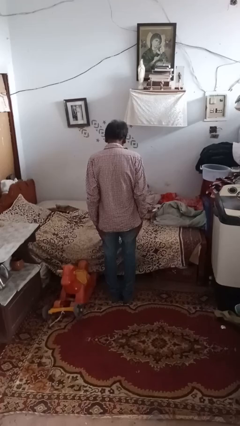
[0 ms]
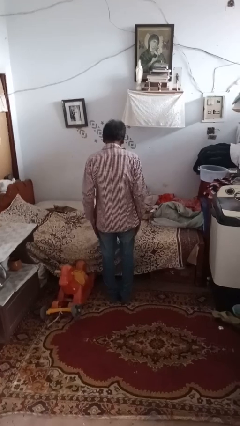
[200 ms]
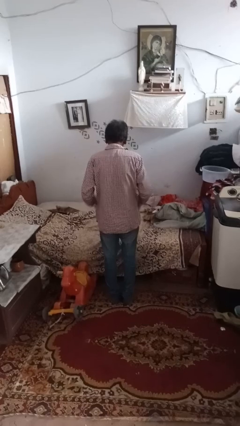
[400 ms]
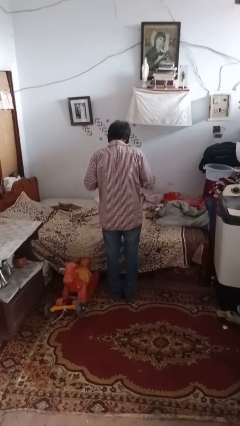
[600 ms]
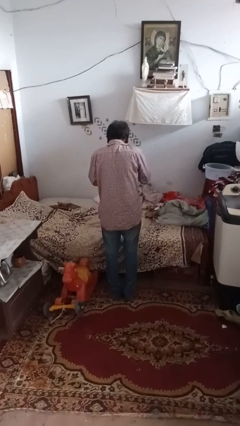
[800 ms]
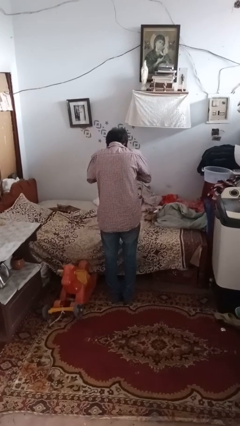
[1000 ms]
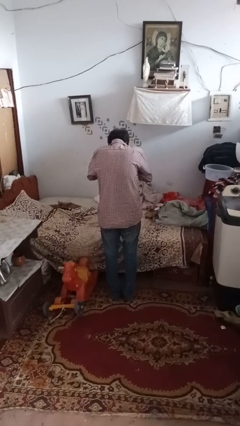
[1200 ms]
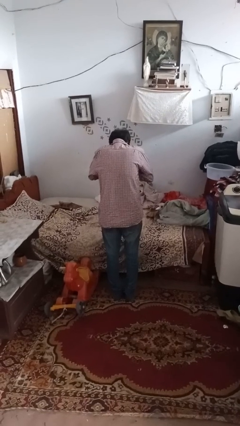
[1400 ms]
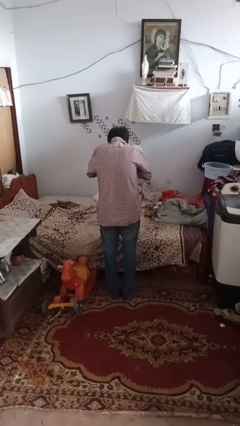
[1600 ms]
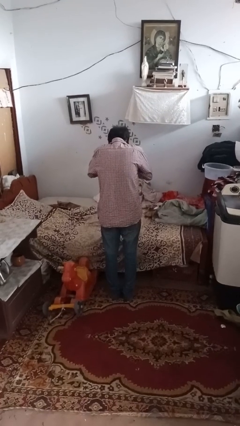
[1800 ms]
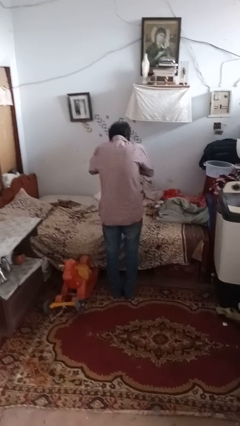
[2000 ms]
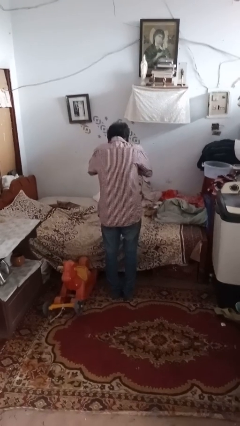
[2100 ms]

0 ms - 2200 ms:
person sneezes into hand

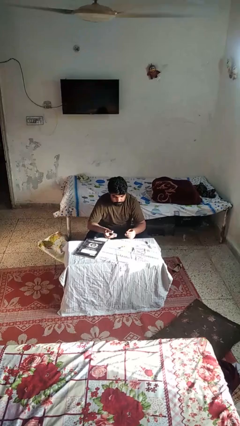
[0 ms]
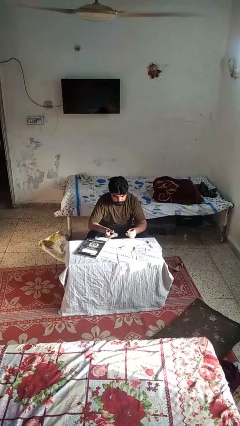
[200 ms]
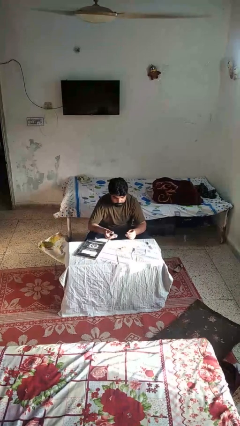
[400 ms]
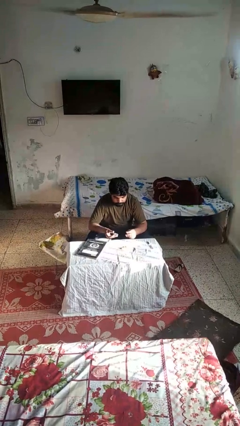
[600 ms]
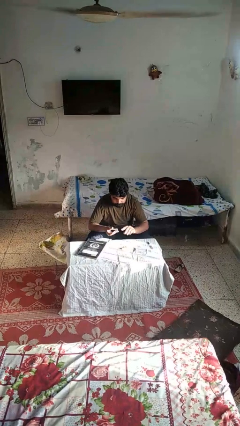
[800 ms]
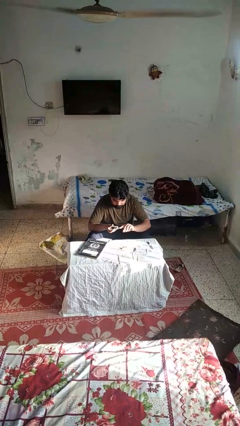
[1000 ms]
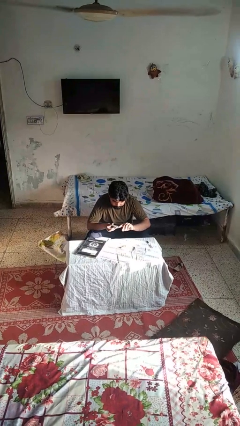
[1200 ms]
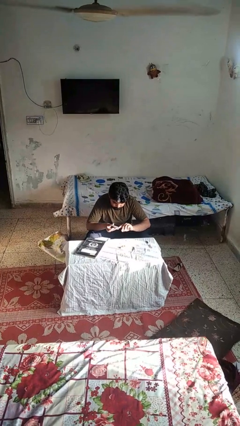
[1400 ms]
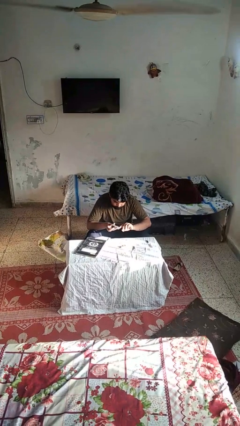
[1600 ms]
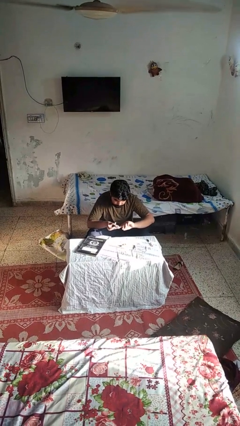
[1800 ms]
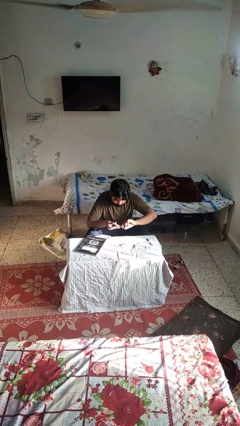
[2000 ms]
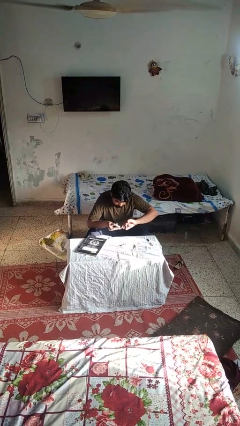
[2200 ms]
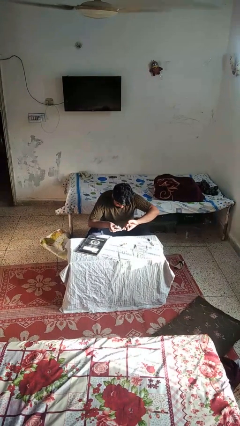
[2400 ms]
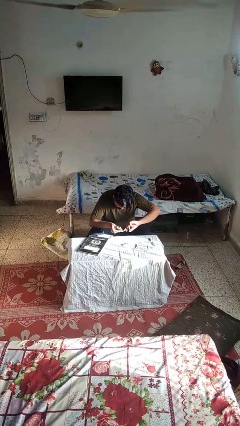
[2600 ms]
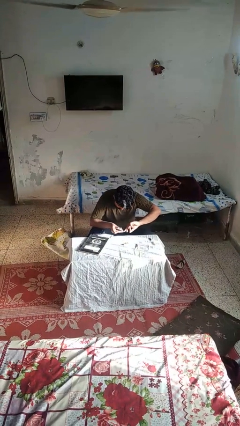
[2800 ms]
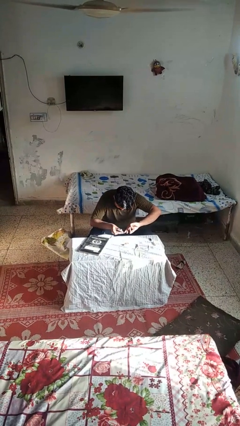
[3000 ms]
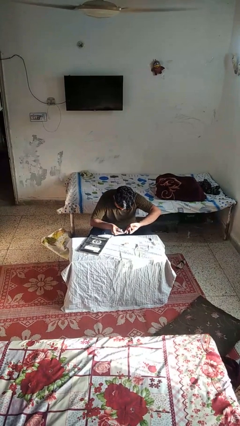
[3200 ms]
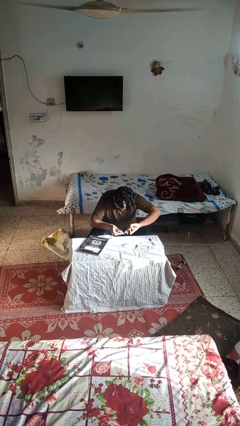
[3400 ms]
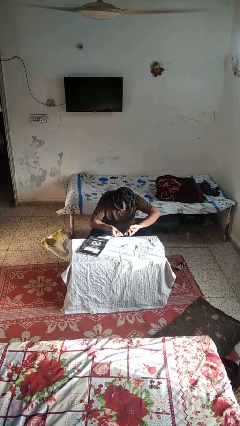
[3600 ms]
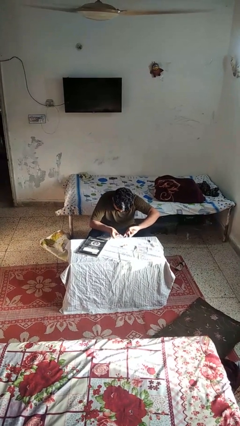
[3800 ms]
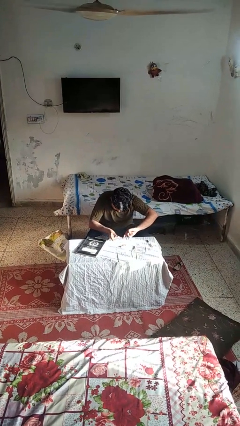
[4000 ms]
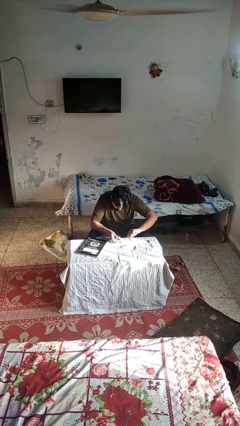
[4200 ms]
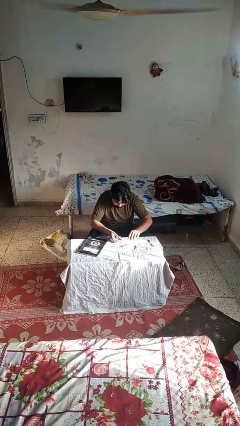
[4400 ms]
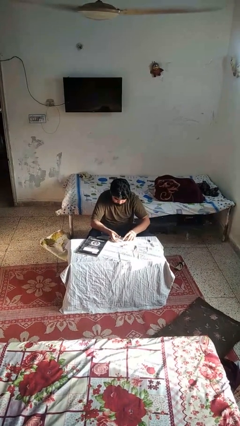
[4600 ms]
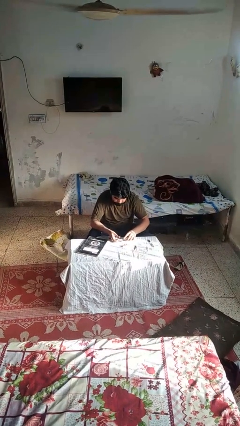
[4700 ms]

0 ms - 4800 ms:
person clips fingernails

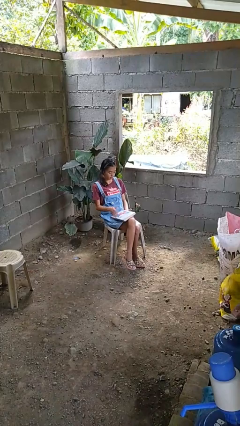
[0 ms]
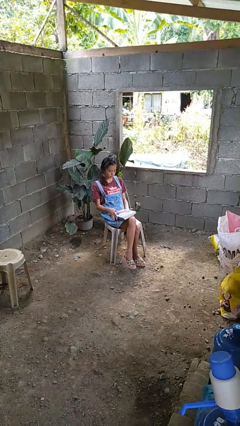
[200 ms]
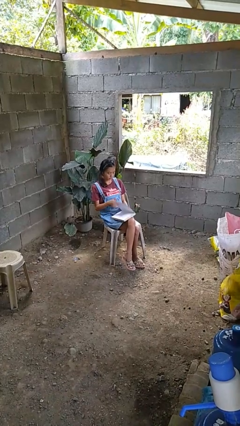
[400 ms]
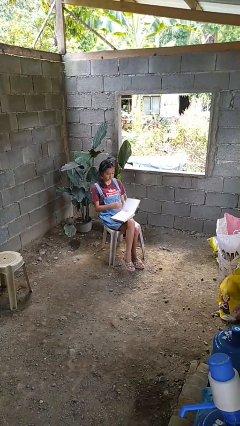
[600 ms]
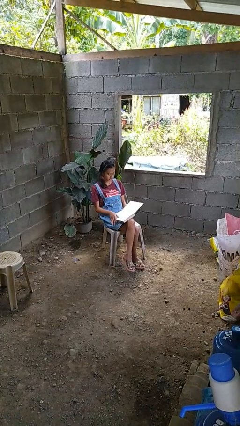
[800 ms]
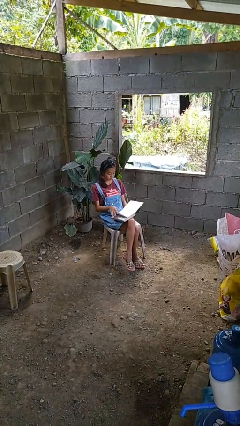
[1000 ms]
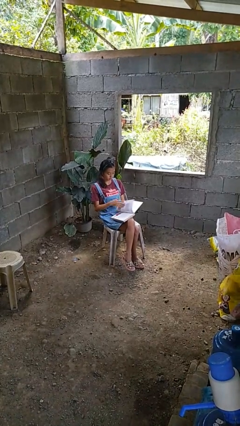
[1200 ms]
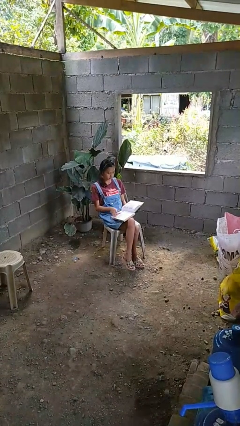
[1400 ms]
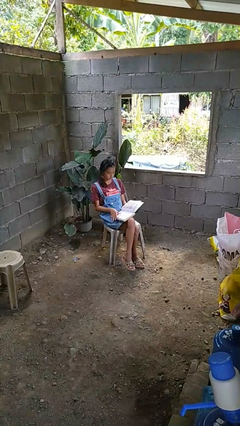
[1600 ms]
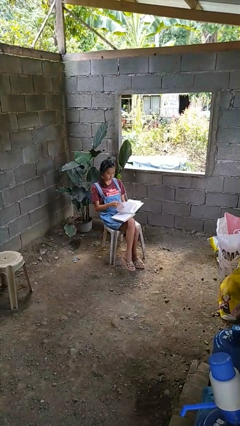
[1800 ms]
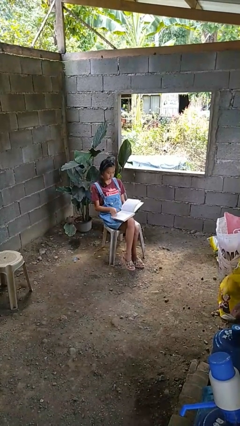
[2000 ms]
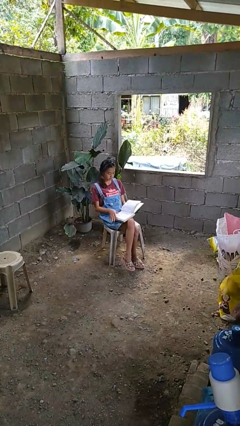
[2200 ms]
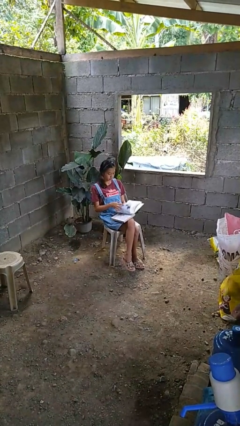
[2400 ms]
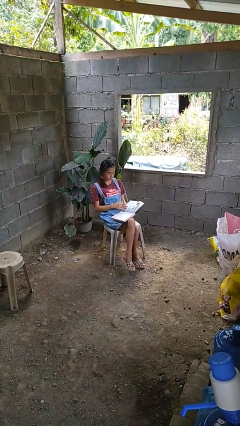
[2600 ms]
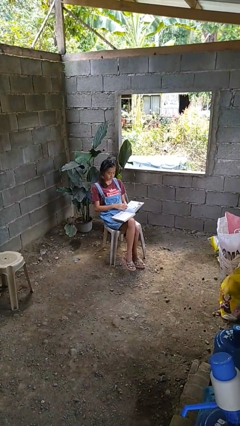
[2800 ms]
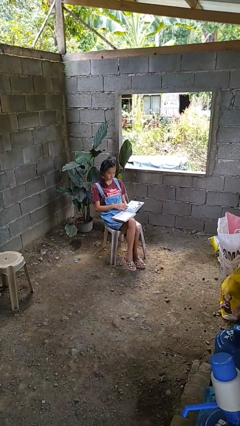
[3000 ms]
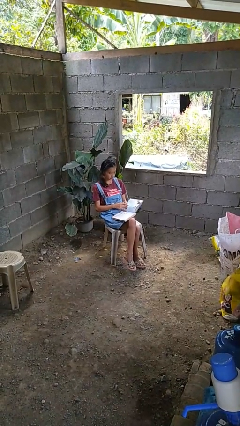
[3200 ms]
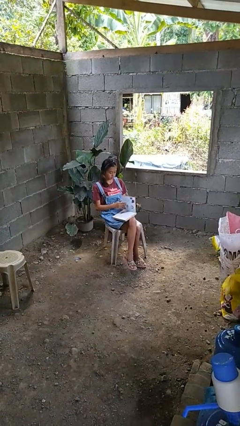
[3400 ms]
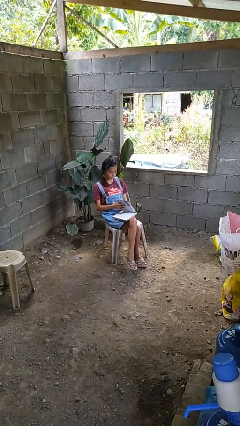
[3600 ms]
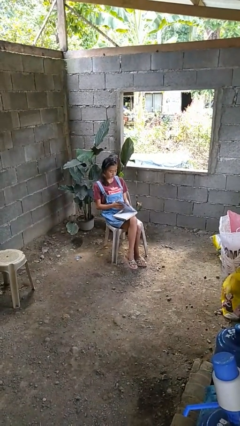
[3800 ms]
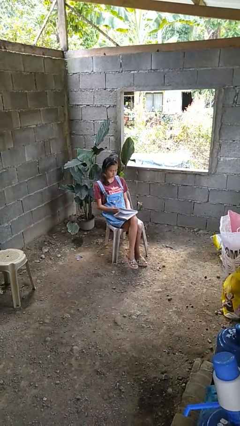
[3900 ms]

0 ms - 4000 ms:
person reads book

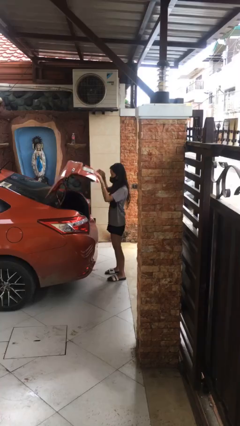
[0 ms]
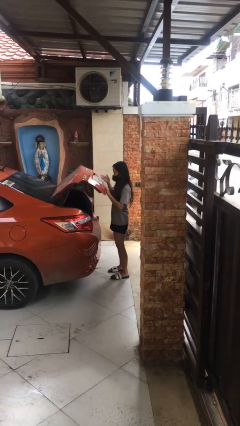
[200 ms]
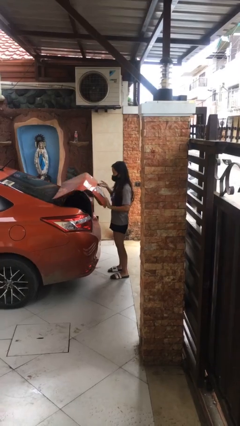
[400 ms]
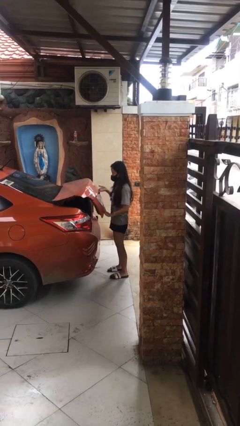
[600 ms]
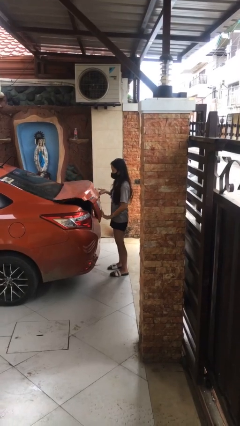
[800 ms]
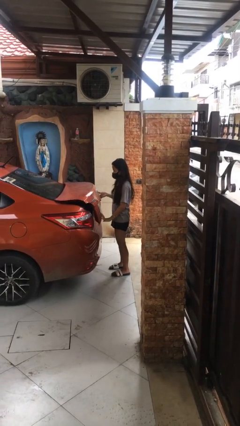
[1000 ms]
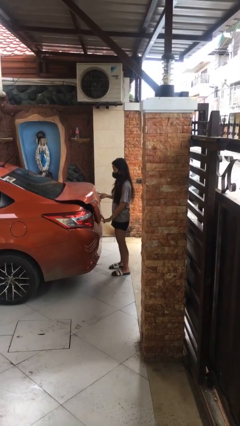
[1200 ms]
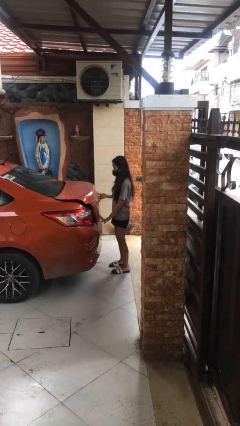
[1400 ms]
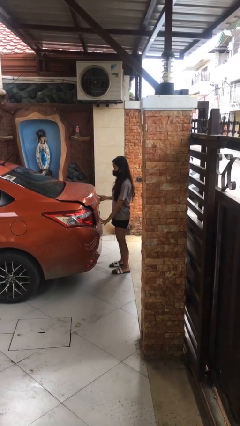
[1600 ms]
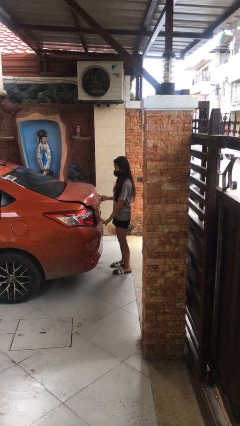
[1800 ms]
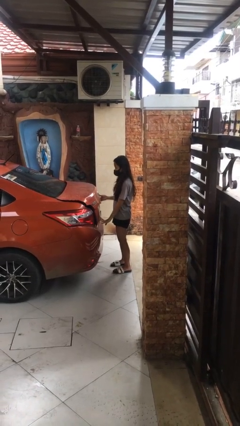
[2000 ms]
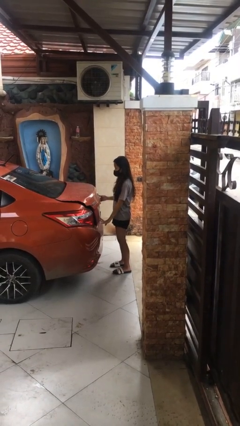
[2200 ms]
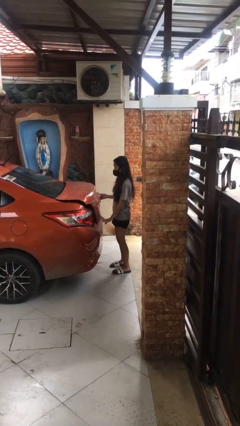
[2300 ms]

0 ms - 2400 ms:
person closes car trunk

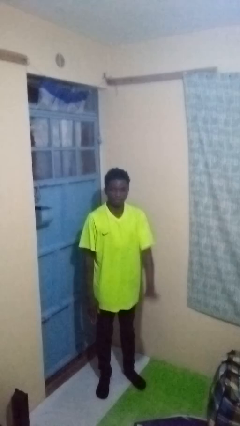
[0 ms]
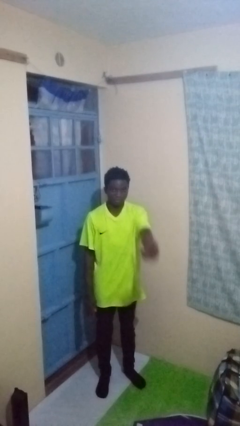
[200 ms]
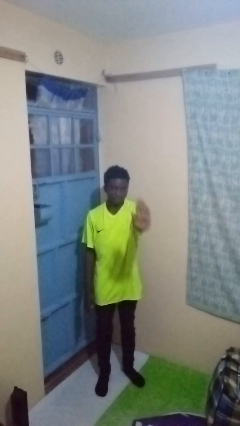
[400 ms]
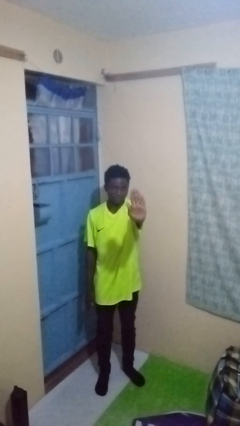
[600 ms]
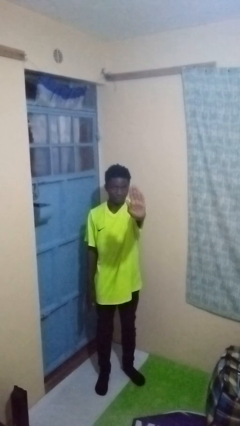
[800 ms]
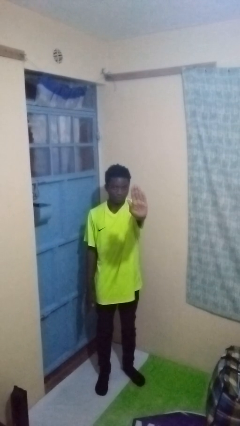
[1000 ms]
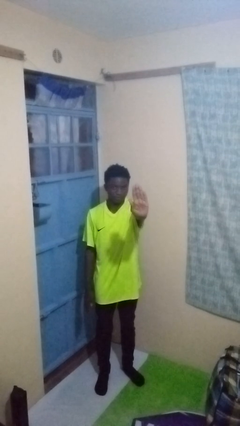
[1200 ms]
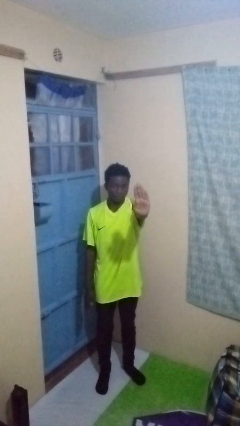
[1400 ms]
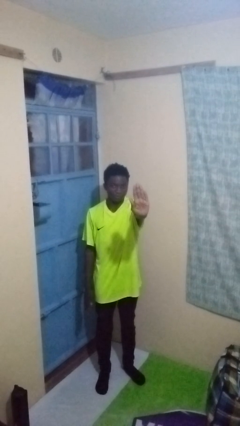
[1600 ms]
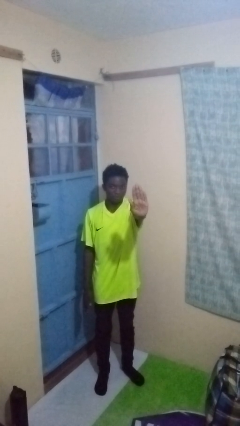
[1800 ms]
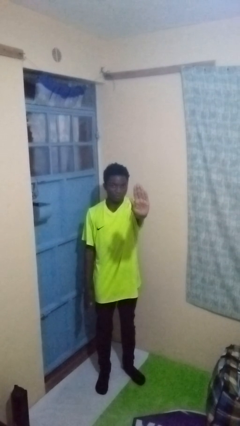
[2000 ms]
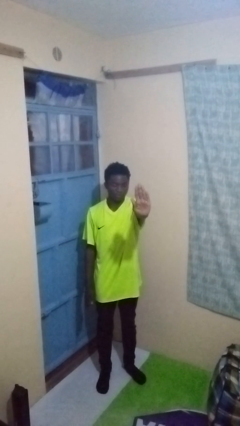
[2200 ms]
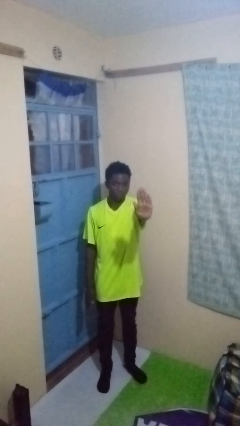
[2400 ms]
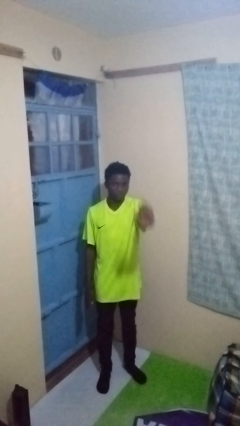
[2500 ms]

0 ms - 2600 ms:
person gestures stop

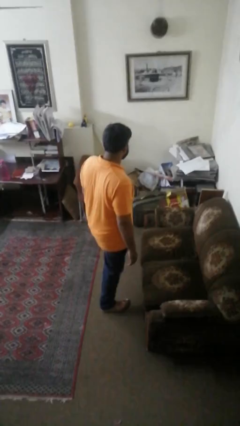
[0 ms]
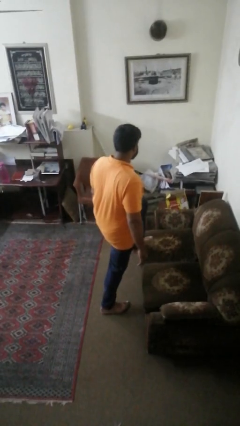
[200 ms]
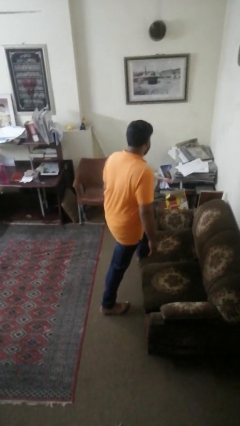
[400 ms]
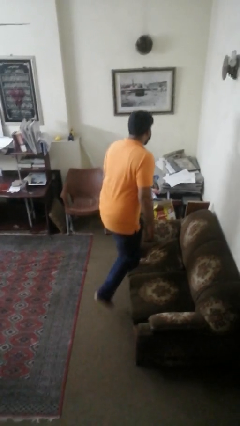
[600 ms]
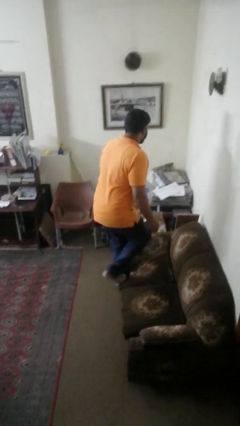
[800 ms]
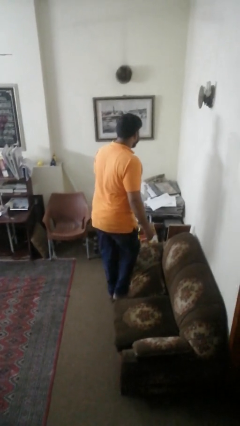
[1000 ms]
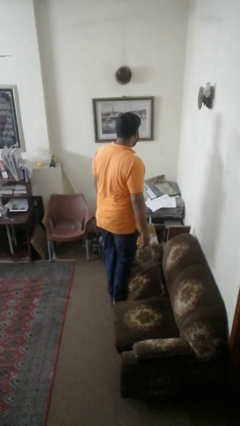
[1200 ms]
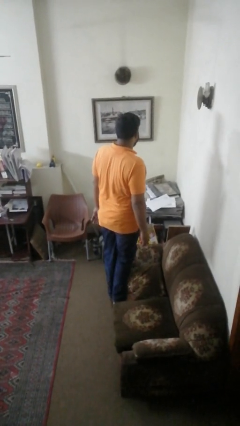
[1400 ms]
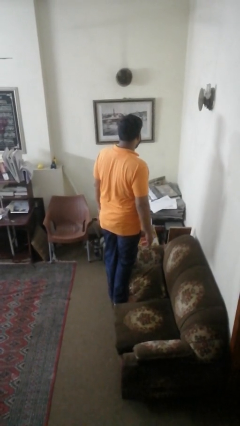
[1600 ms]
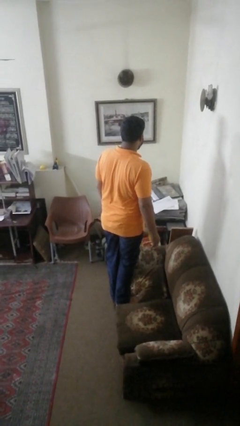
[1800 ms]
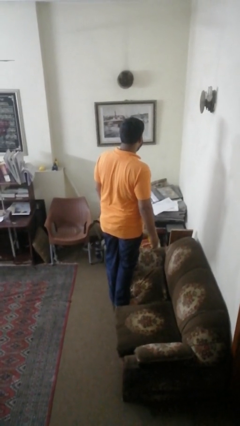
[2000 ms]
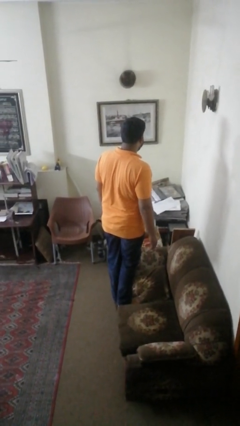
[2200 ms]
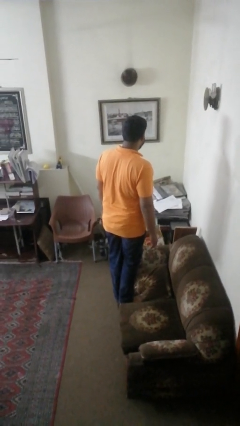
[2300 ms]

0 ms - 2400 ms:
person climbs on couch
